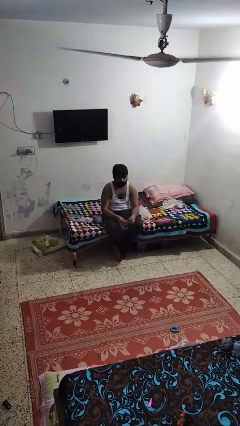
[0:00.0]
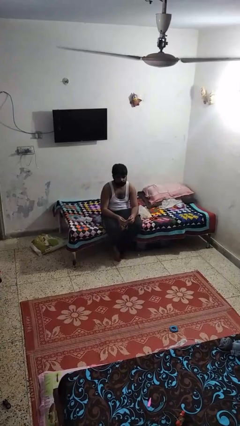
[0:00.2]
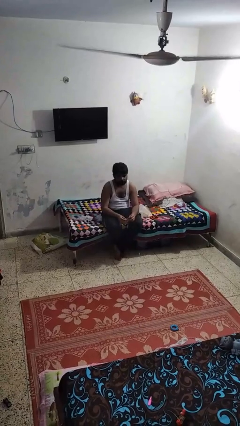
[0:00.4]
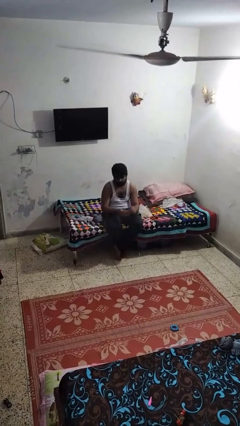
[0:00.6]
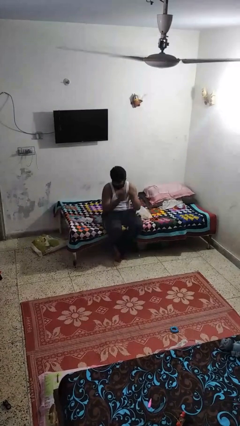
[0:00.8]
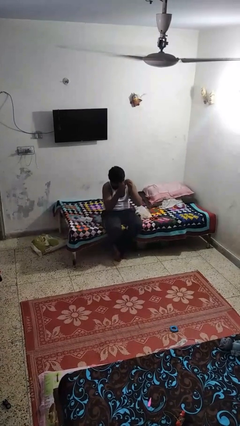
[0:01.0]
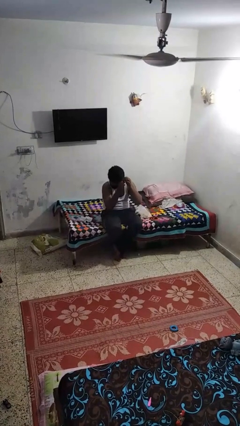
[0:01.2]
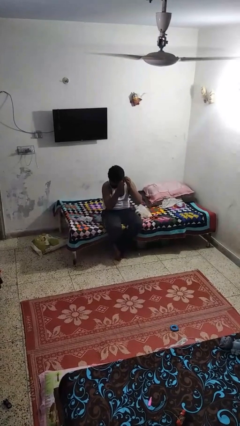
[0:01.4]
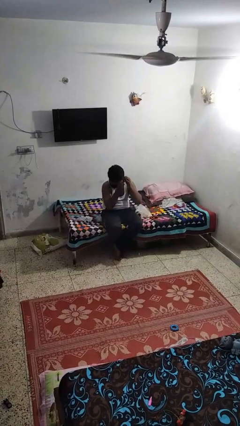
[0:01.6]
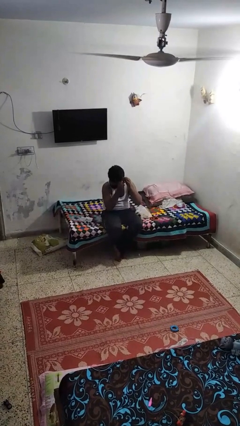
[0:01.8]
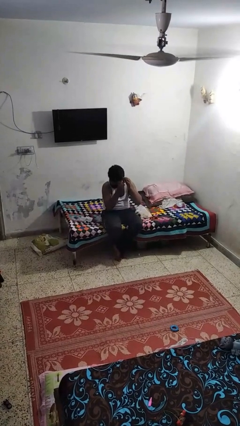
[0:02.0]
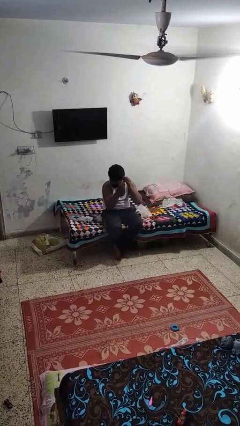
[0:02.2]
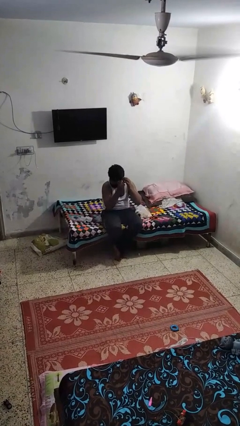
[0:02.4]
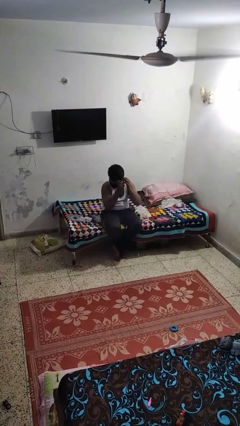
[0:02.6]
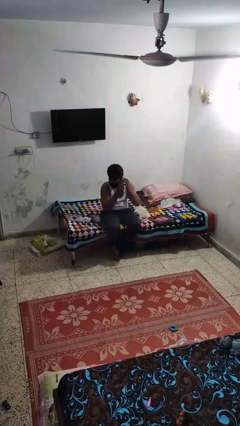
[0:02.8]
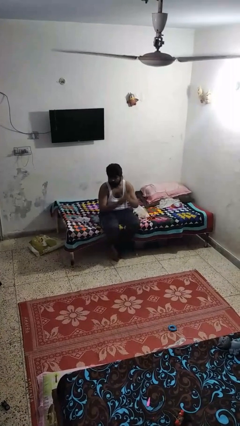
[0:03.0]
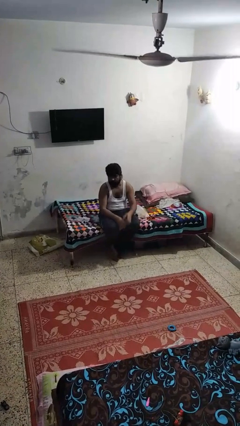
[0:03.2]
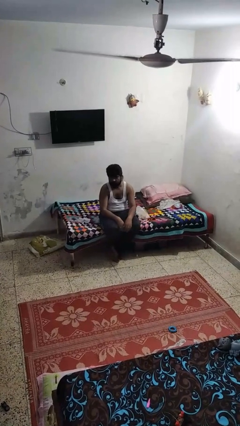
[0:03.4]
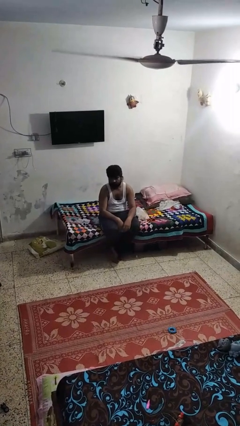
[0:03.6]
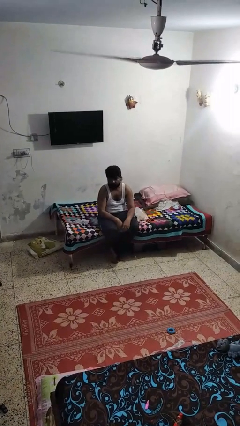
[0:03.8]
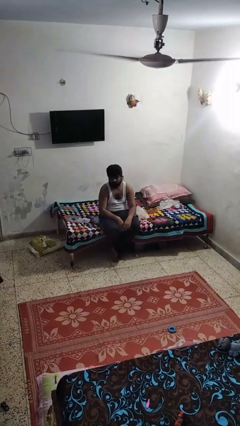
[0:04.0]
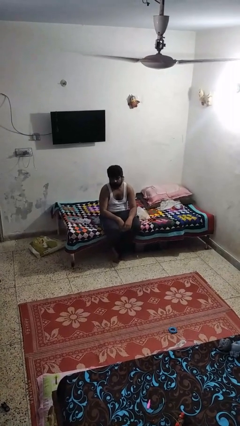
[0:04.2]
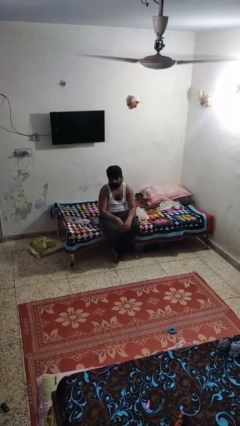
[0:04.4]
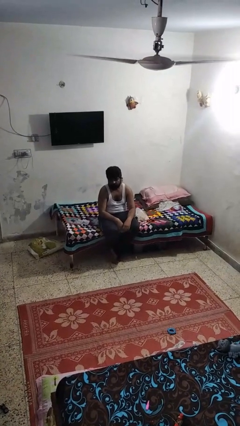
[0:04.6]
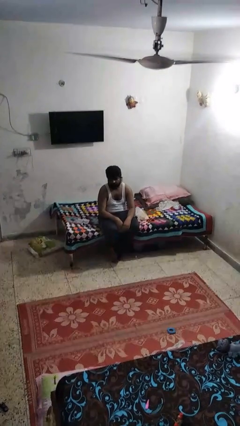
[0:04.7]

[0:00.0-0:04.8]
person puts on earrings

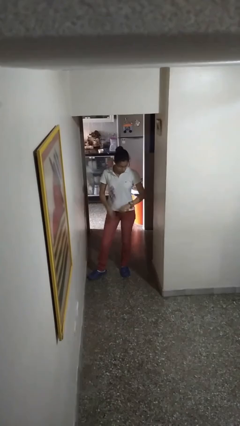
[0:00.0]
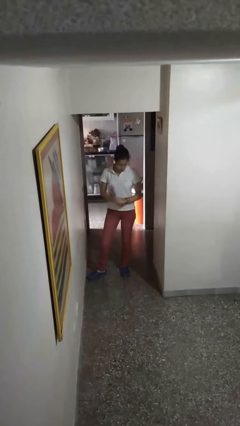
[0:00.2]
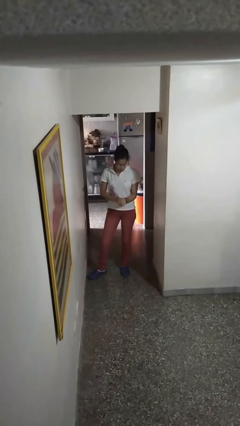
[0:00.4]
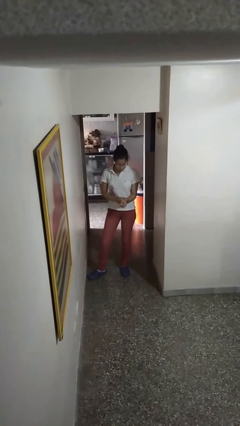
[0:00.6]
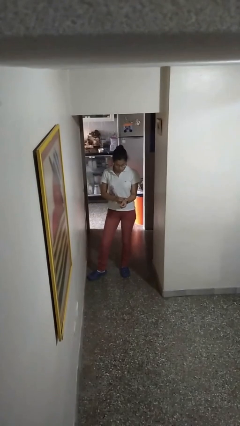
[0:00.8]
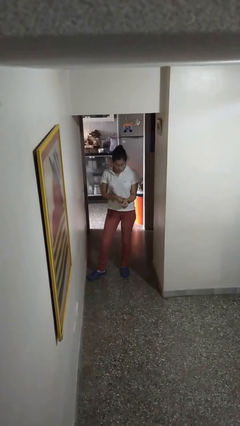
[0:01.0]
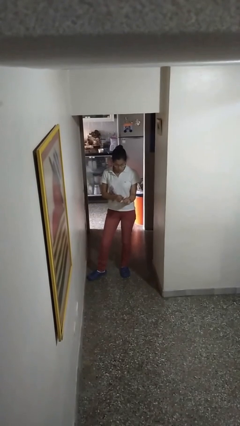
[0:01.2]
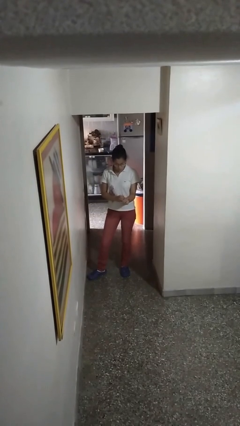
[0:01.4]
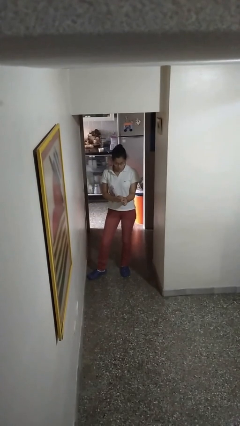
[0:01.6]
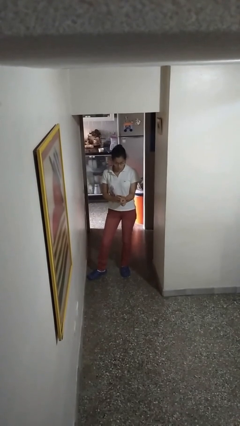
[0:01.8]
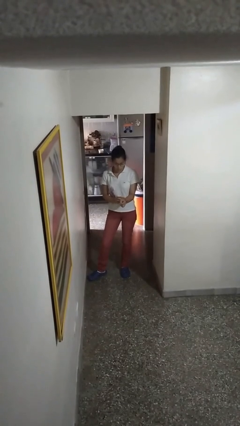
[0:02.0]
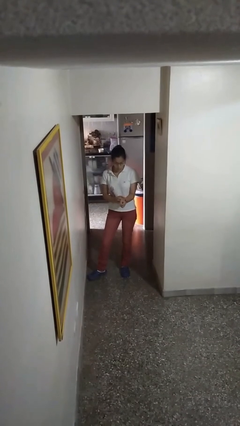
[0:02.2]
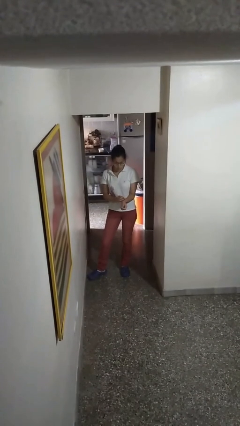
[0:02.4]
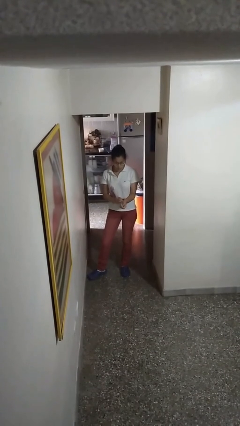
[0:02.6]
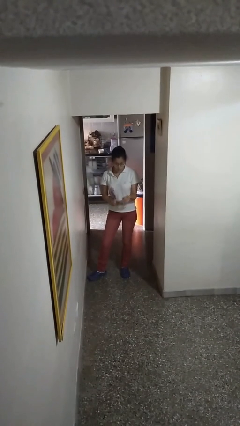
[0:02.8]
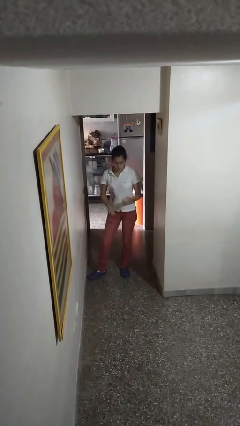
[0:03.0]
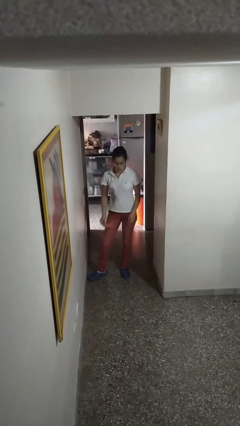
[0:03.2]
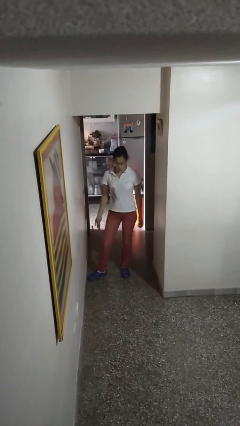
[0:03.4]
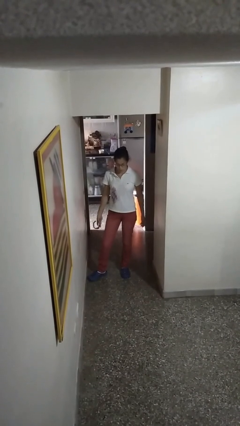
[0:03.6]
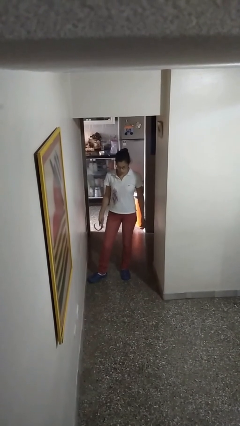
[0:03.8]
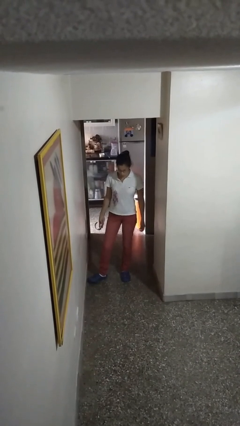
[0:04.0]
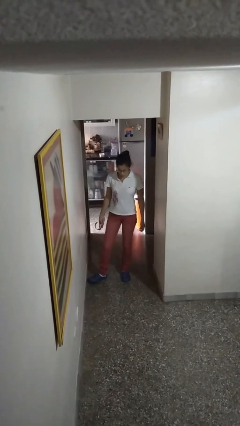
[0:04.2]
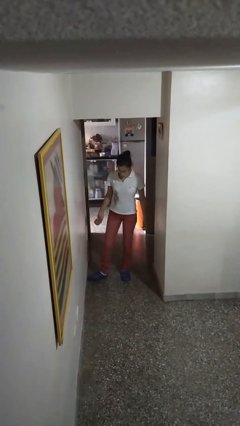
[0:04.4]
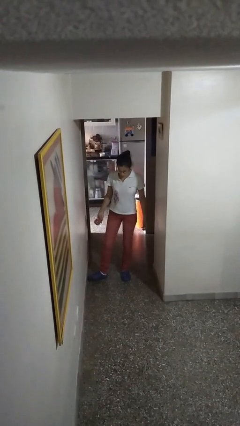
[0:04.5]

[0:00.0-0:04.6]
person takes off wristwatch

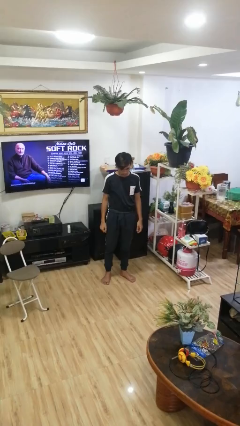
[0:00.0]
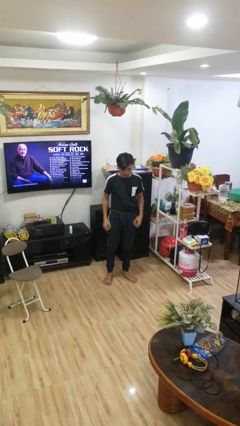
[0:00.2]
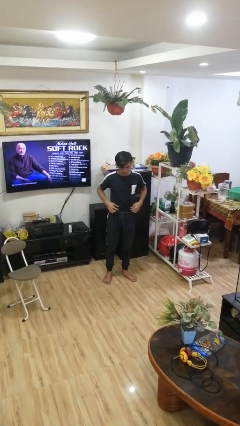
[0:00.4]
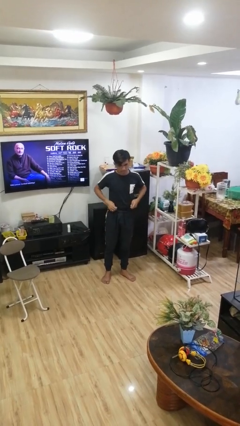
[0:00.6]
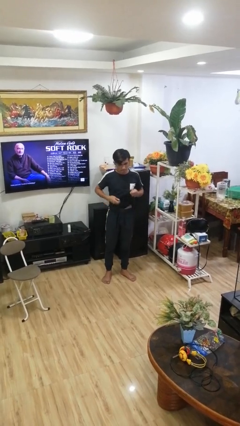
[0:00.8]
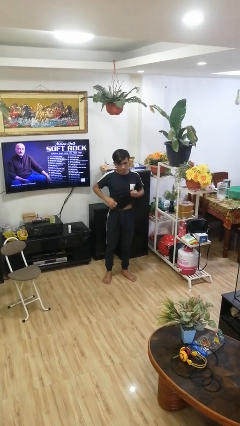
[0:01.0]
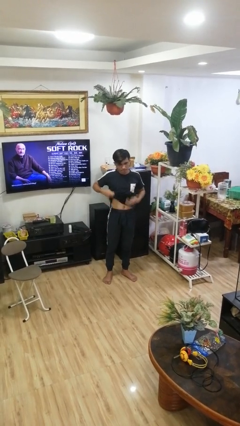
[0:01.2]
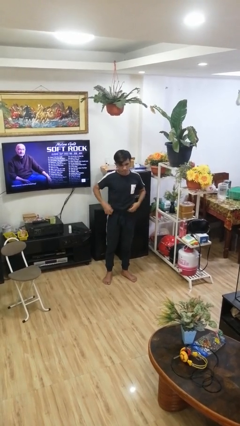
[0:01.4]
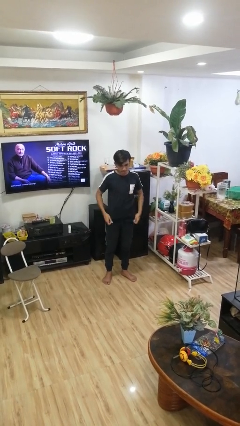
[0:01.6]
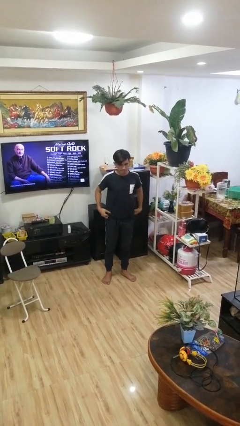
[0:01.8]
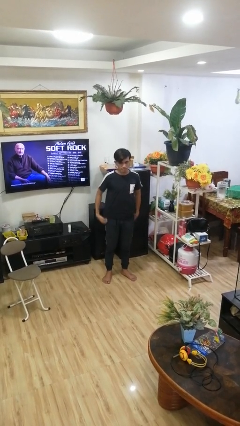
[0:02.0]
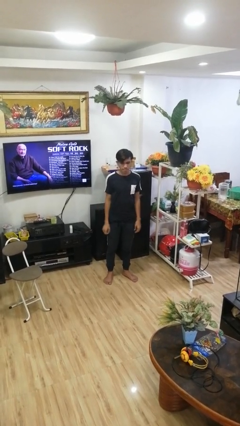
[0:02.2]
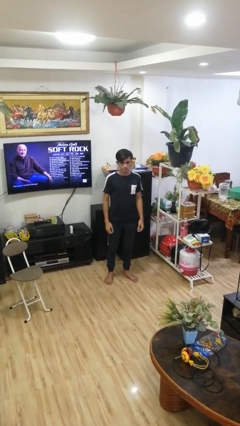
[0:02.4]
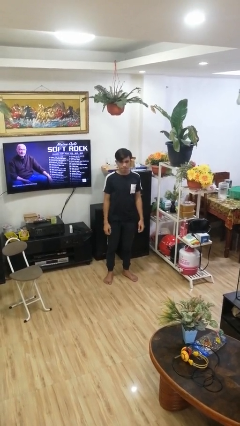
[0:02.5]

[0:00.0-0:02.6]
person untucks shirt

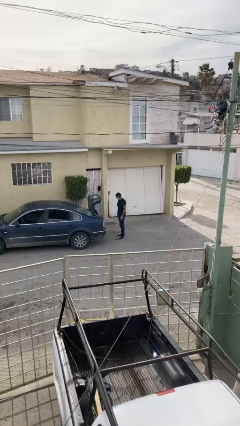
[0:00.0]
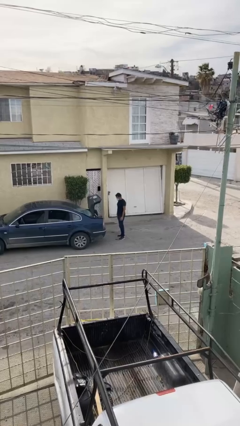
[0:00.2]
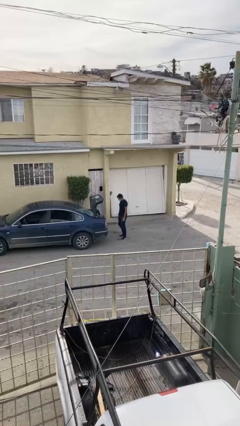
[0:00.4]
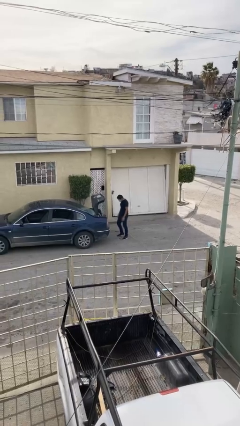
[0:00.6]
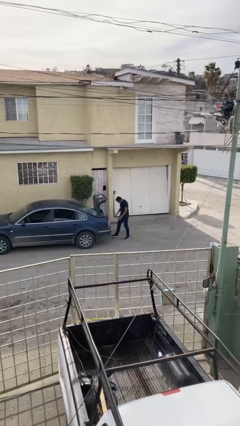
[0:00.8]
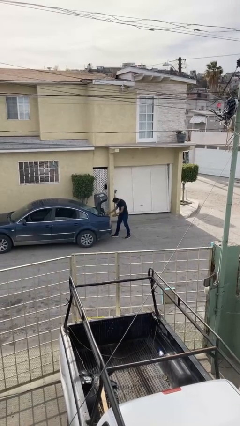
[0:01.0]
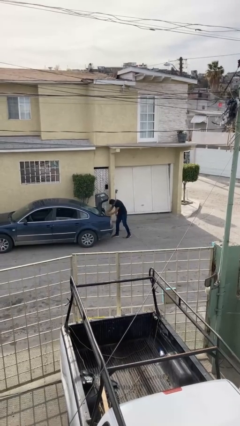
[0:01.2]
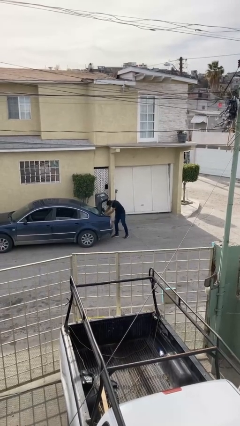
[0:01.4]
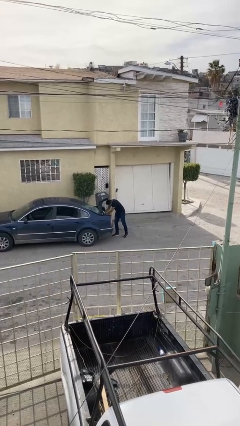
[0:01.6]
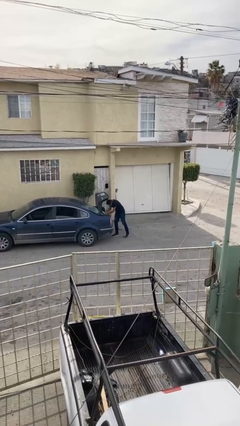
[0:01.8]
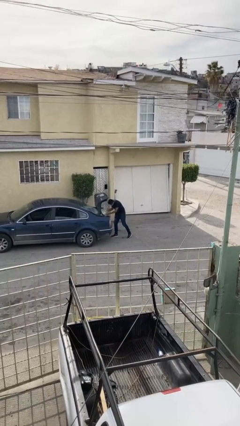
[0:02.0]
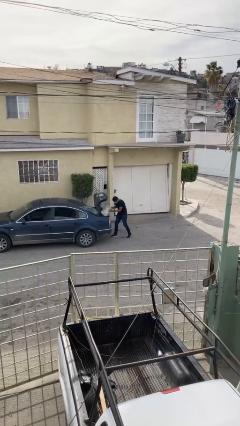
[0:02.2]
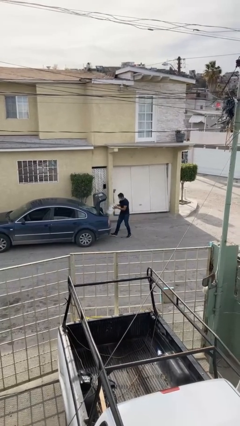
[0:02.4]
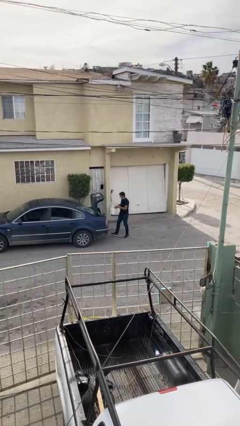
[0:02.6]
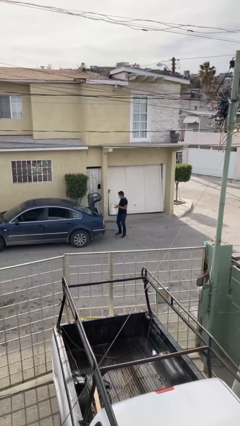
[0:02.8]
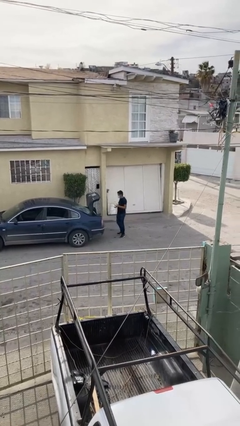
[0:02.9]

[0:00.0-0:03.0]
person unloads car

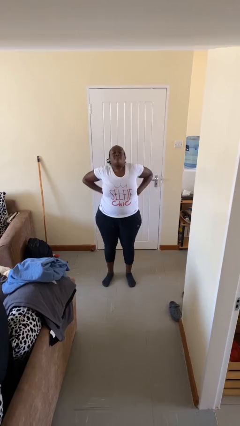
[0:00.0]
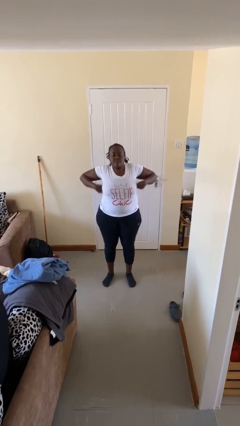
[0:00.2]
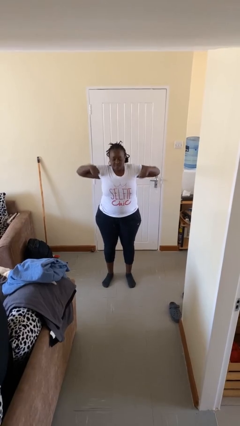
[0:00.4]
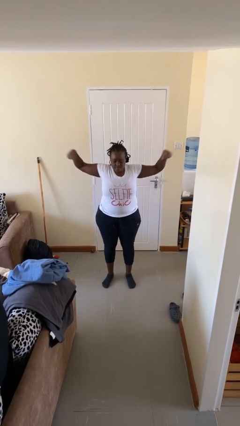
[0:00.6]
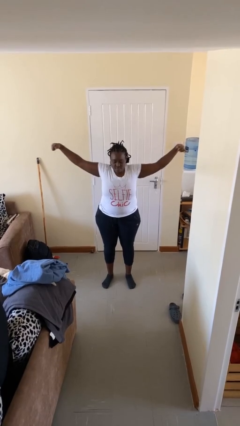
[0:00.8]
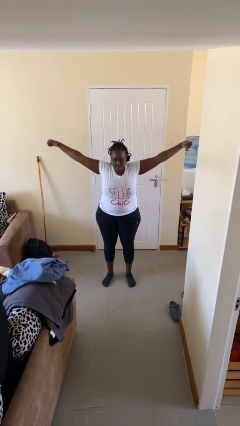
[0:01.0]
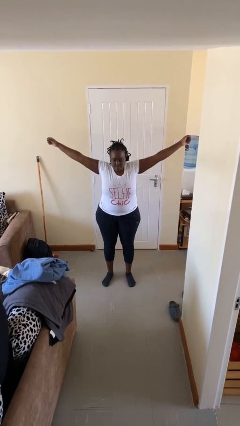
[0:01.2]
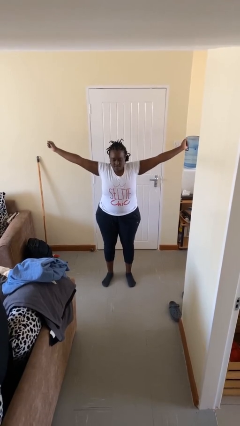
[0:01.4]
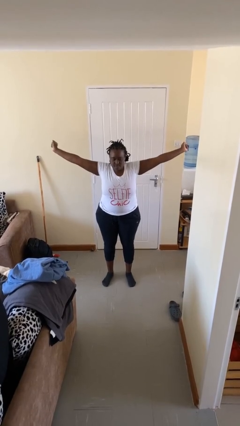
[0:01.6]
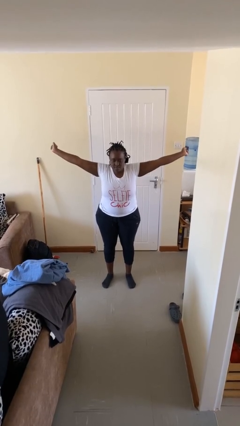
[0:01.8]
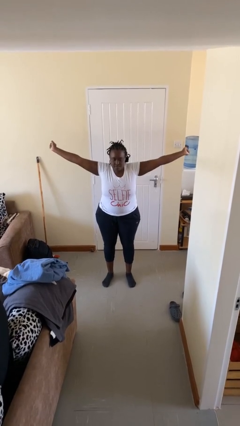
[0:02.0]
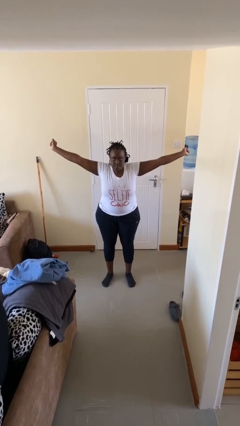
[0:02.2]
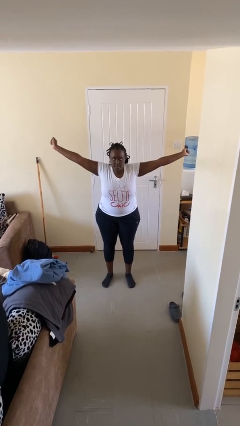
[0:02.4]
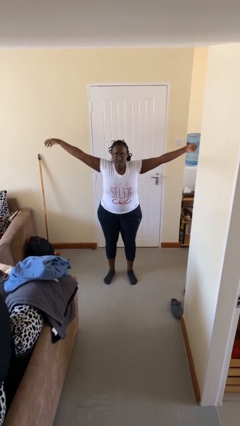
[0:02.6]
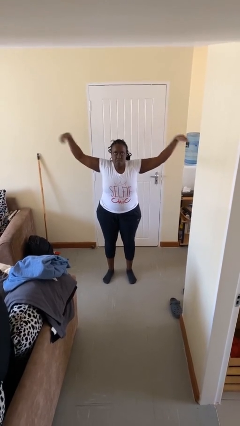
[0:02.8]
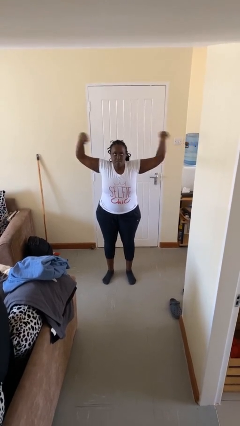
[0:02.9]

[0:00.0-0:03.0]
person stretches arms to side
